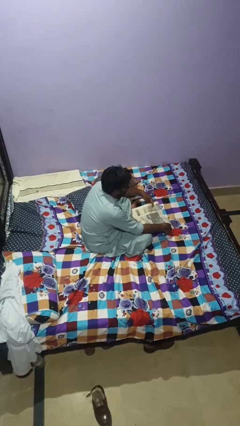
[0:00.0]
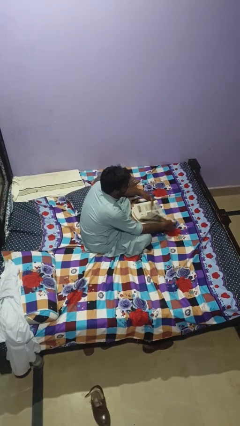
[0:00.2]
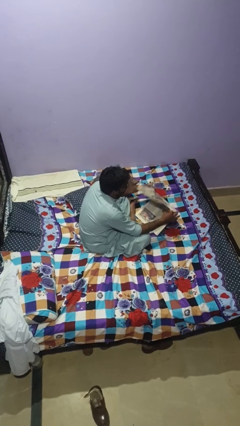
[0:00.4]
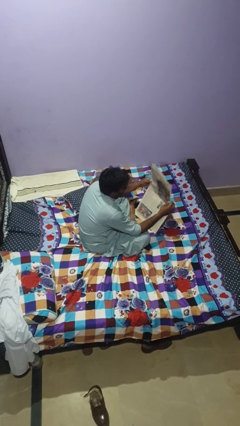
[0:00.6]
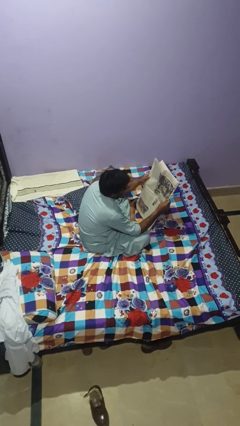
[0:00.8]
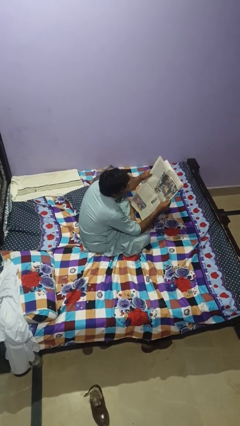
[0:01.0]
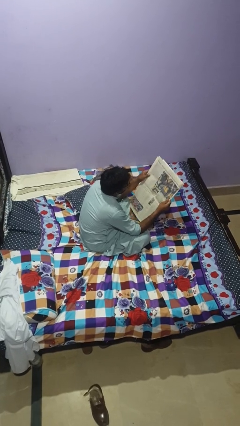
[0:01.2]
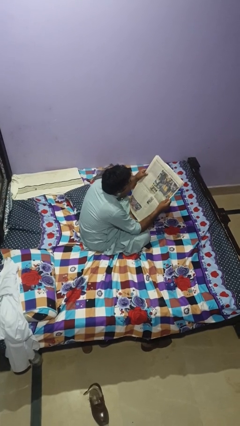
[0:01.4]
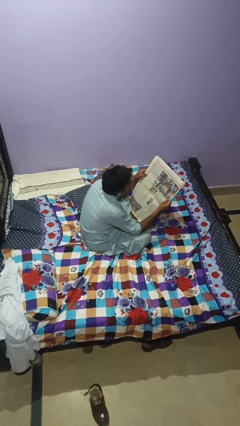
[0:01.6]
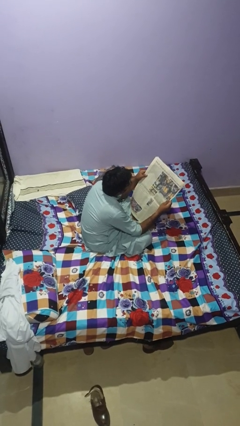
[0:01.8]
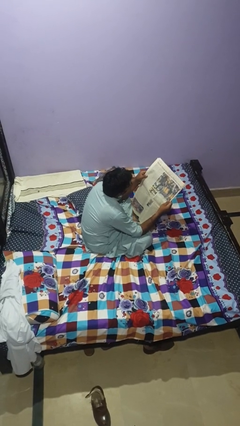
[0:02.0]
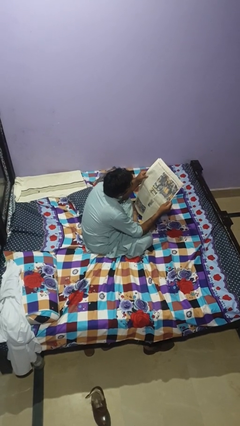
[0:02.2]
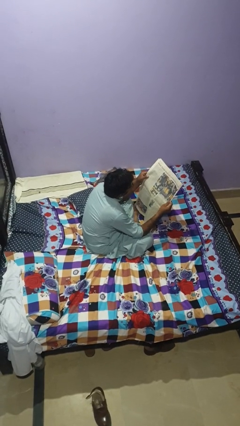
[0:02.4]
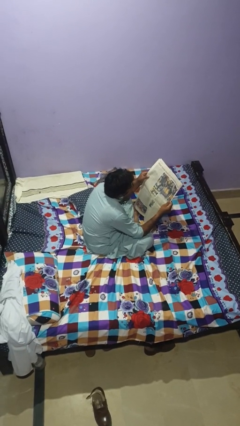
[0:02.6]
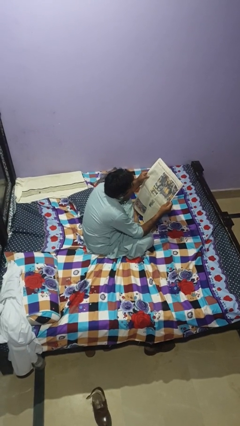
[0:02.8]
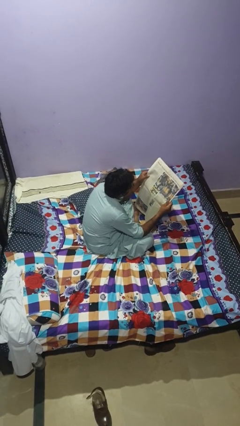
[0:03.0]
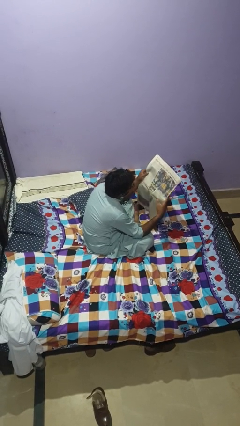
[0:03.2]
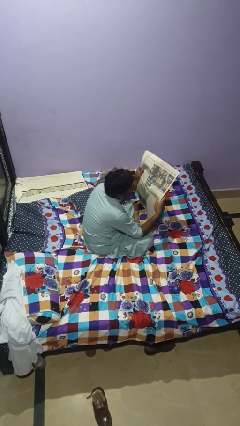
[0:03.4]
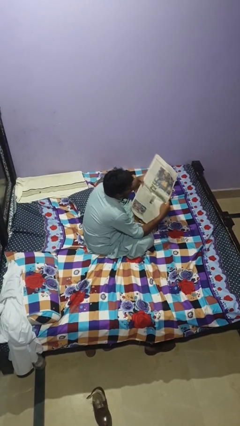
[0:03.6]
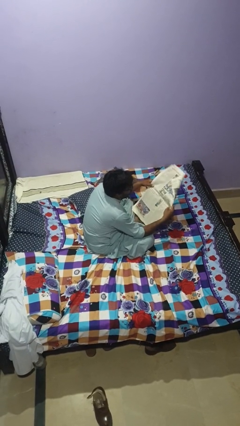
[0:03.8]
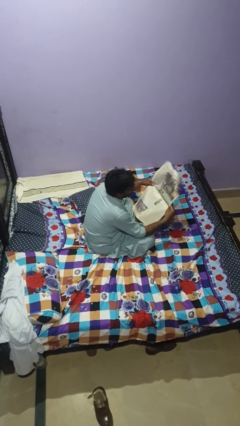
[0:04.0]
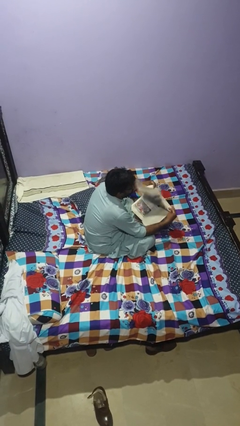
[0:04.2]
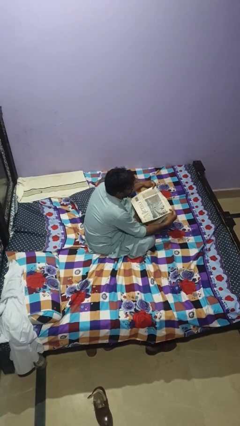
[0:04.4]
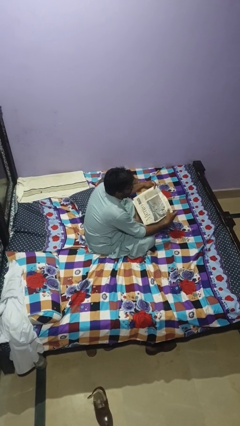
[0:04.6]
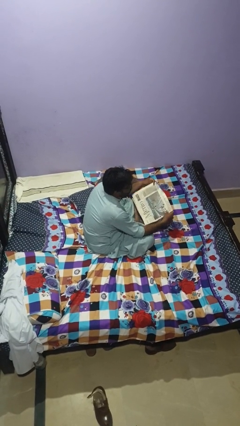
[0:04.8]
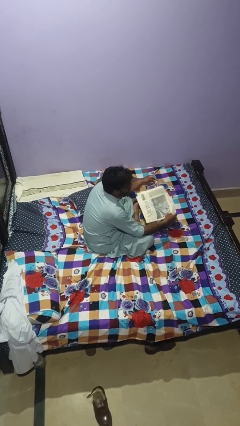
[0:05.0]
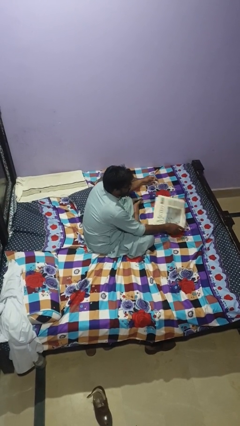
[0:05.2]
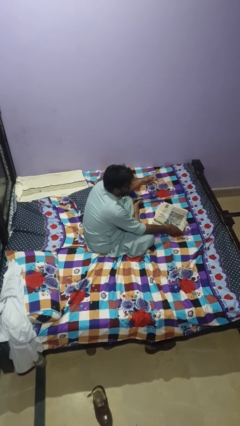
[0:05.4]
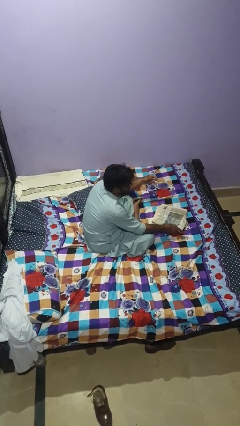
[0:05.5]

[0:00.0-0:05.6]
person reads newspaper

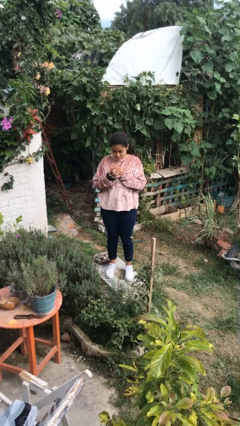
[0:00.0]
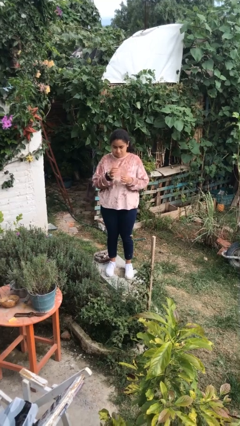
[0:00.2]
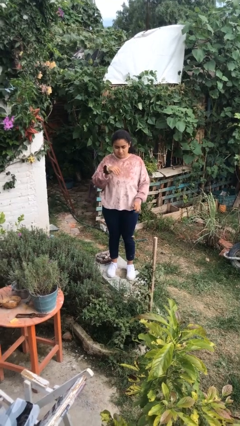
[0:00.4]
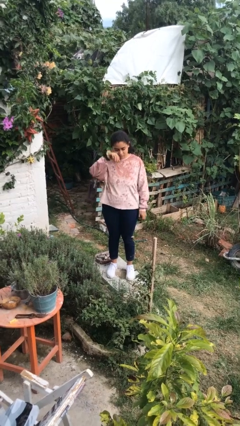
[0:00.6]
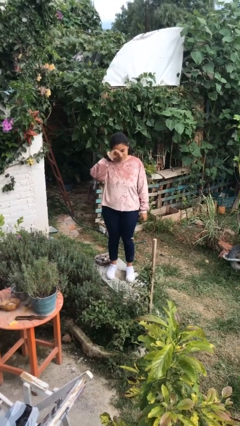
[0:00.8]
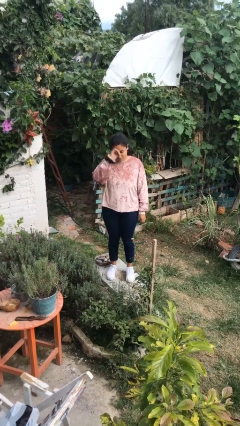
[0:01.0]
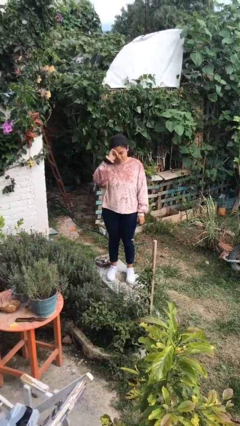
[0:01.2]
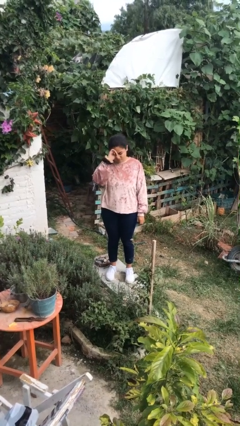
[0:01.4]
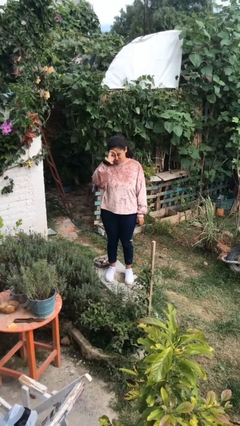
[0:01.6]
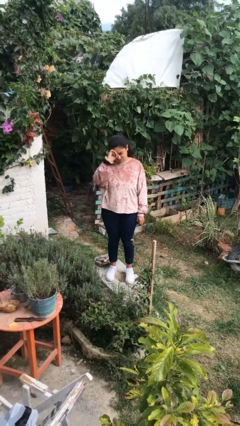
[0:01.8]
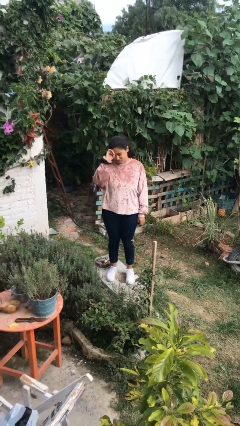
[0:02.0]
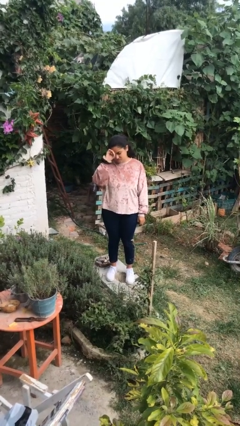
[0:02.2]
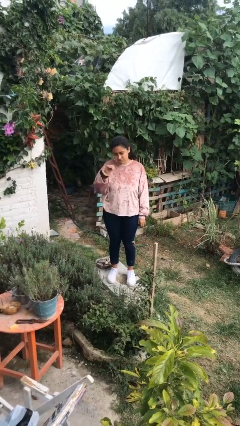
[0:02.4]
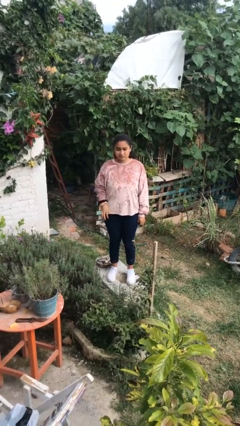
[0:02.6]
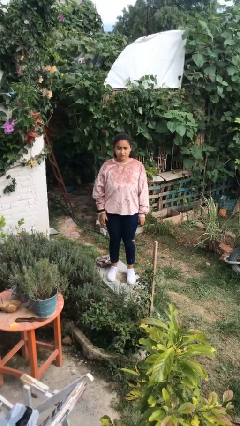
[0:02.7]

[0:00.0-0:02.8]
person rubs eyes

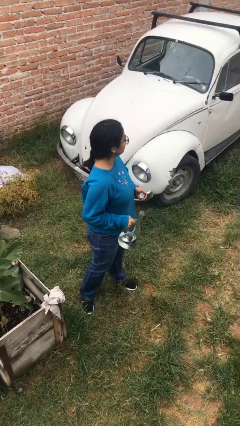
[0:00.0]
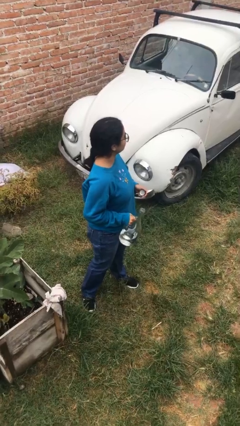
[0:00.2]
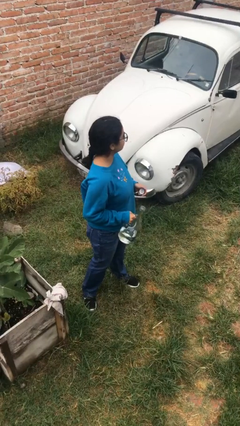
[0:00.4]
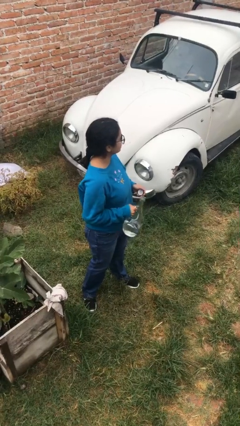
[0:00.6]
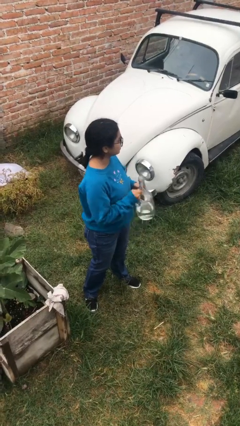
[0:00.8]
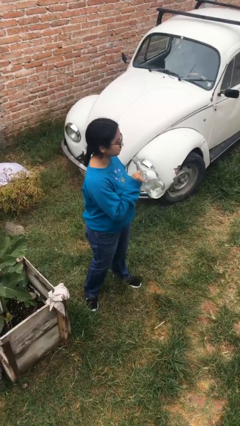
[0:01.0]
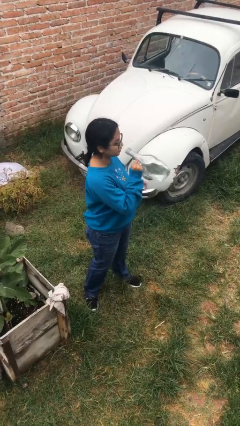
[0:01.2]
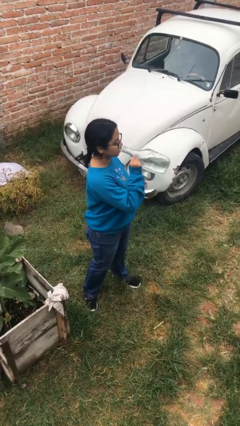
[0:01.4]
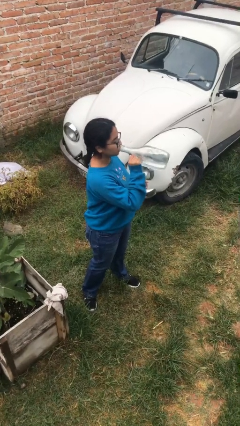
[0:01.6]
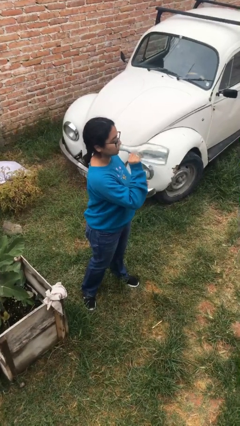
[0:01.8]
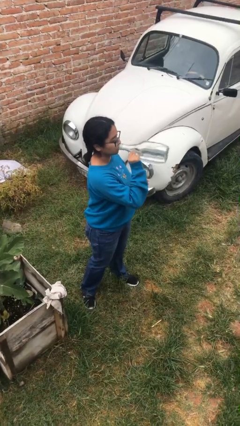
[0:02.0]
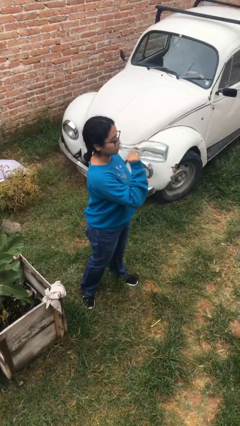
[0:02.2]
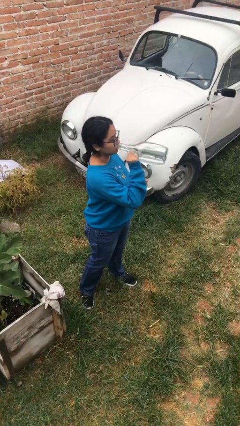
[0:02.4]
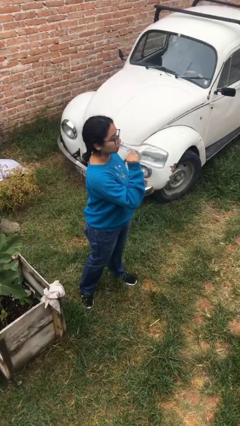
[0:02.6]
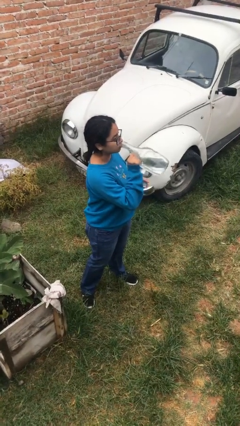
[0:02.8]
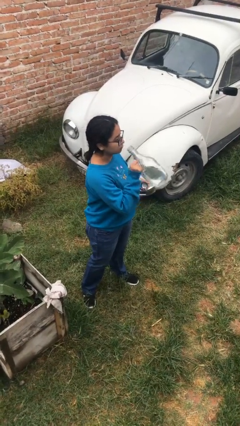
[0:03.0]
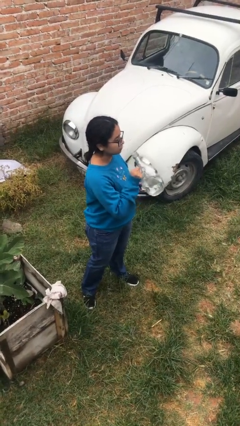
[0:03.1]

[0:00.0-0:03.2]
person drinks from bottle

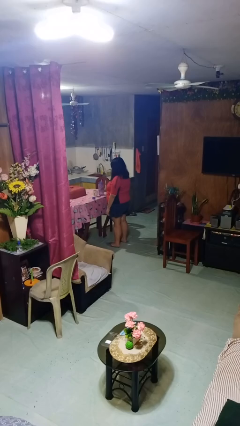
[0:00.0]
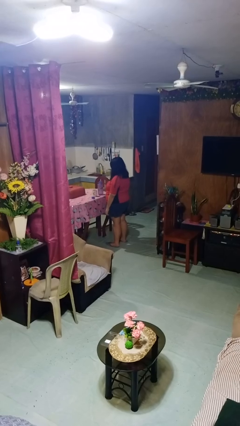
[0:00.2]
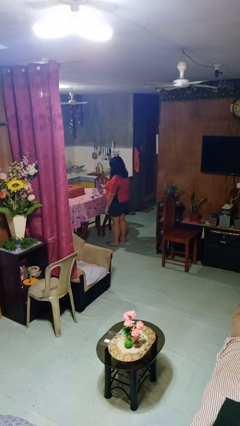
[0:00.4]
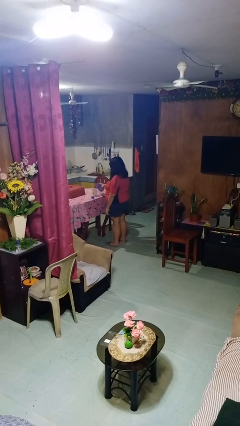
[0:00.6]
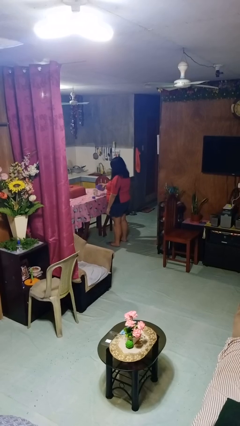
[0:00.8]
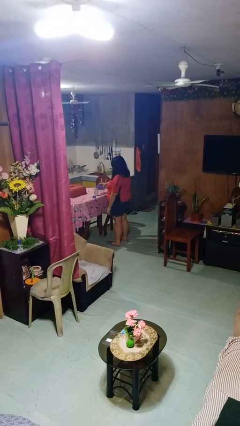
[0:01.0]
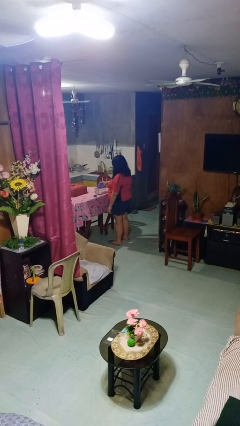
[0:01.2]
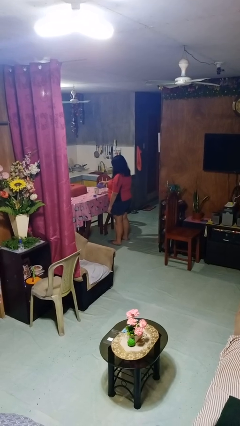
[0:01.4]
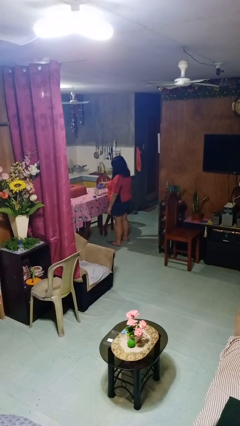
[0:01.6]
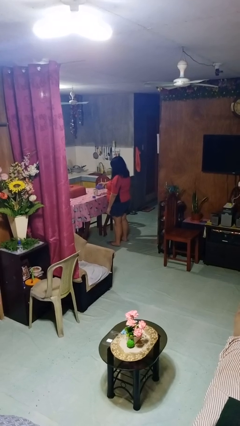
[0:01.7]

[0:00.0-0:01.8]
person pours liquid into cup

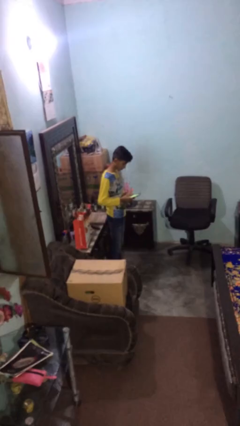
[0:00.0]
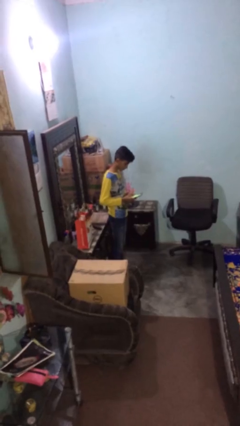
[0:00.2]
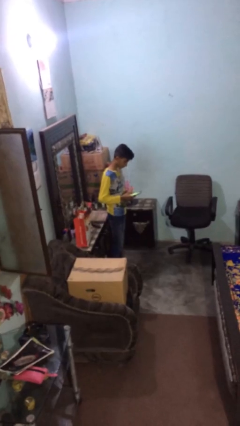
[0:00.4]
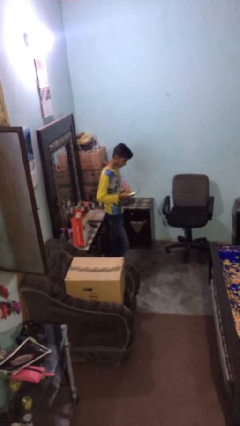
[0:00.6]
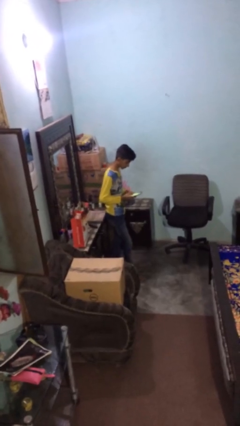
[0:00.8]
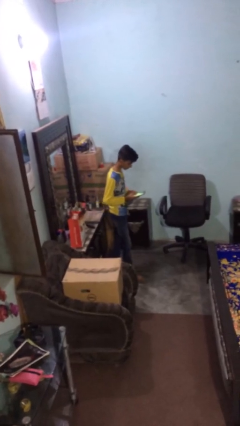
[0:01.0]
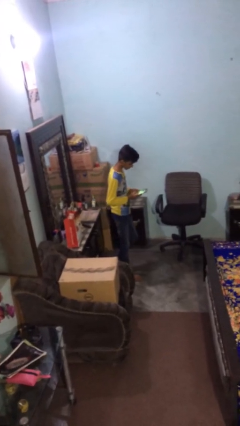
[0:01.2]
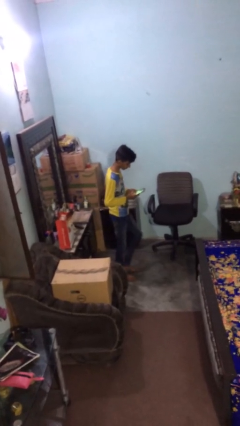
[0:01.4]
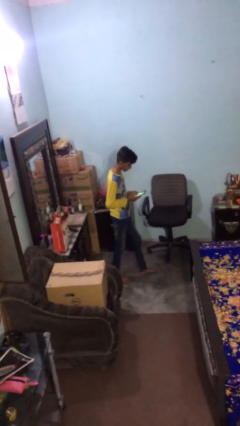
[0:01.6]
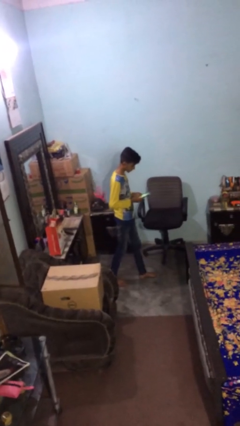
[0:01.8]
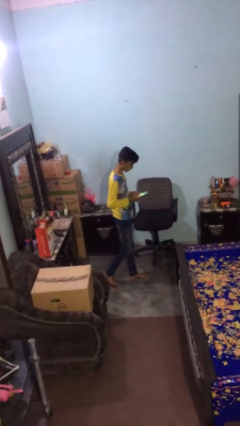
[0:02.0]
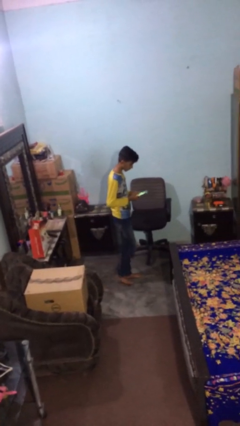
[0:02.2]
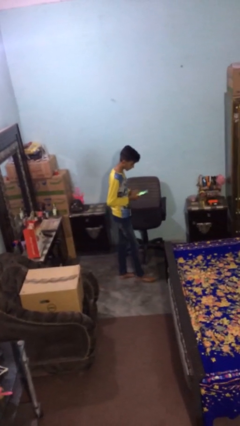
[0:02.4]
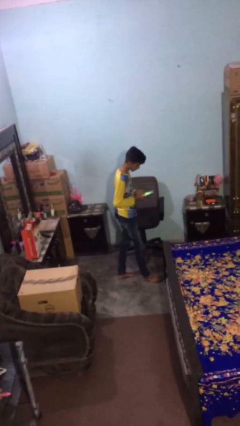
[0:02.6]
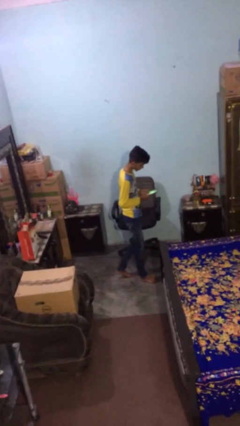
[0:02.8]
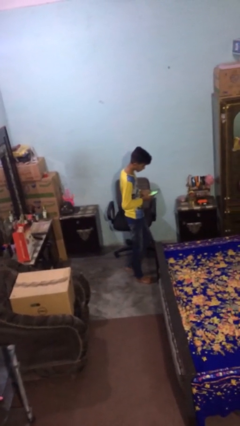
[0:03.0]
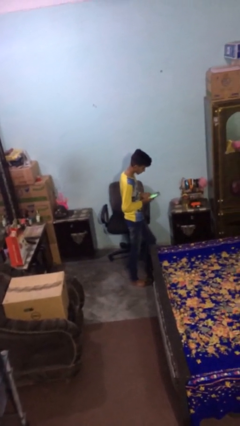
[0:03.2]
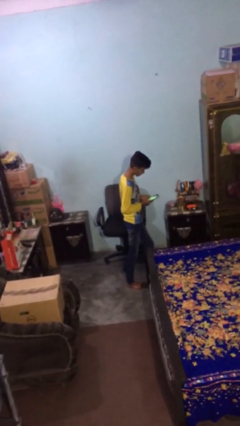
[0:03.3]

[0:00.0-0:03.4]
person texts on phone

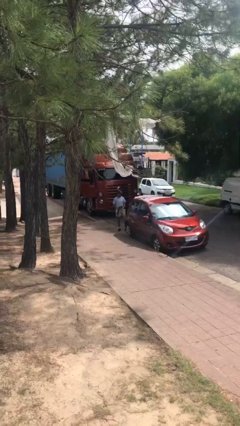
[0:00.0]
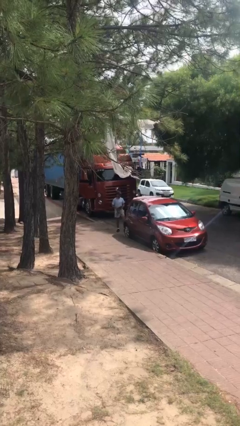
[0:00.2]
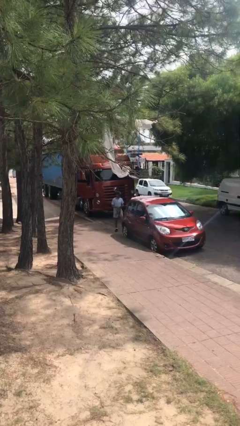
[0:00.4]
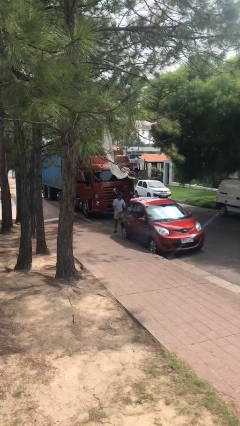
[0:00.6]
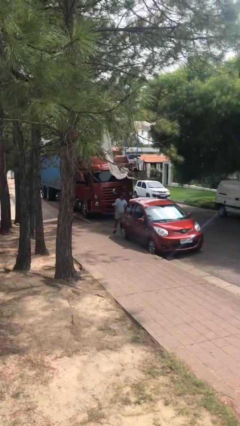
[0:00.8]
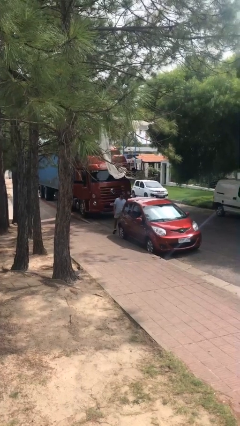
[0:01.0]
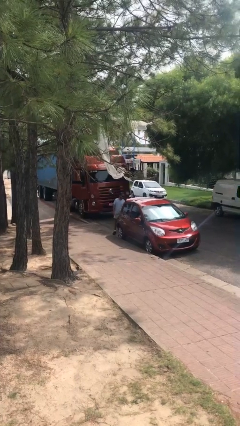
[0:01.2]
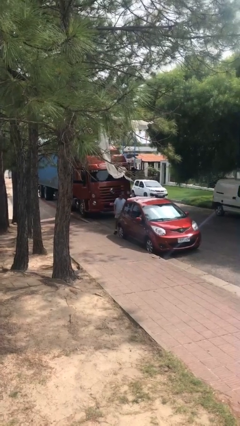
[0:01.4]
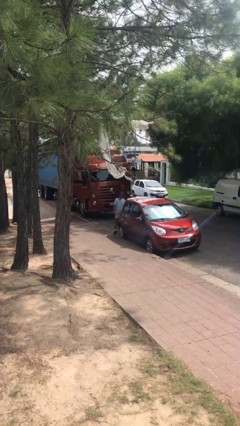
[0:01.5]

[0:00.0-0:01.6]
person loads car
